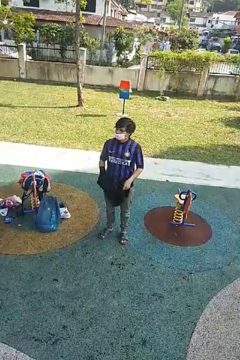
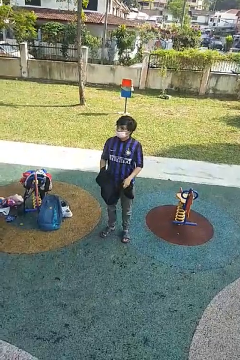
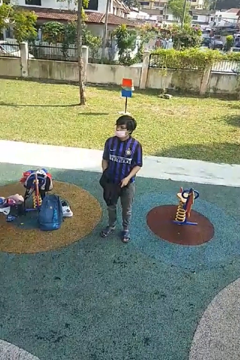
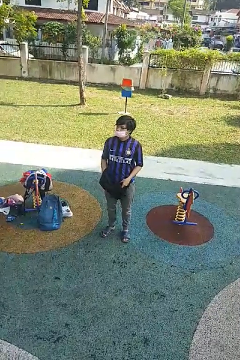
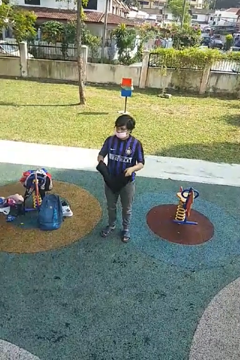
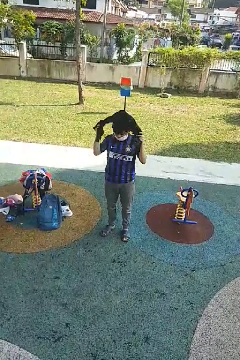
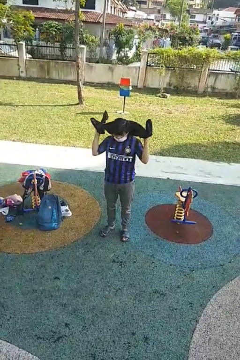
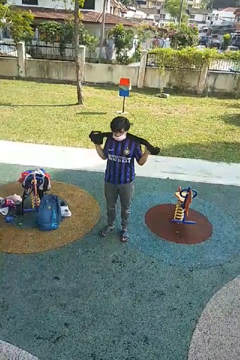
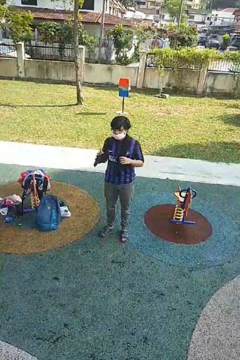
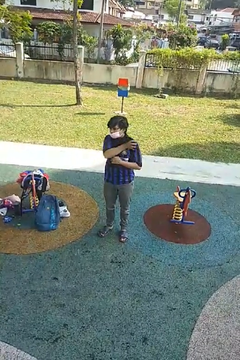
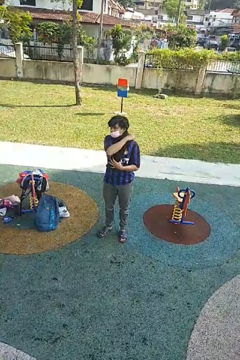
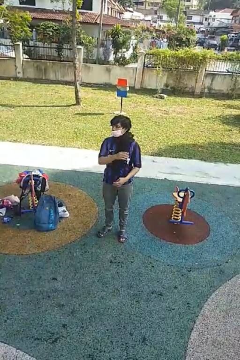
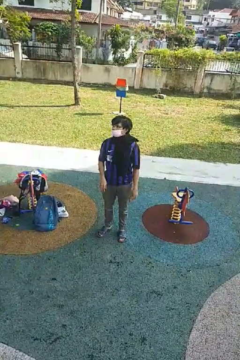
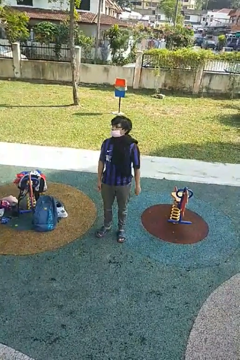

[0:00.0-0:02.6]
person puts on scarf

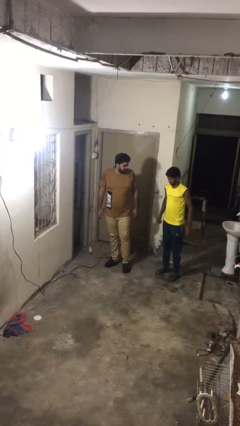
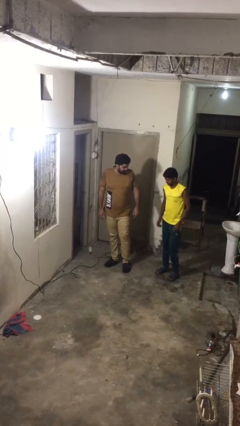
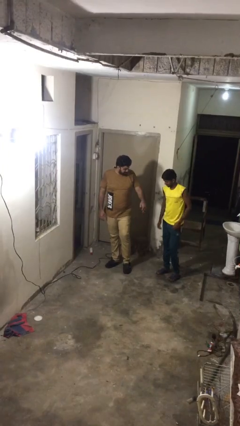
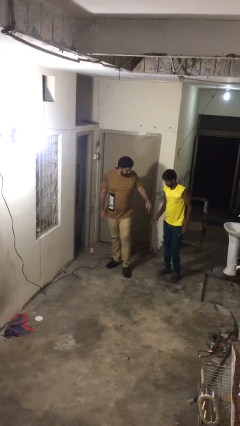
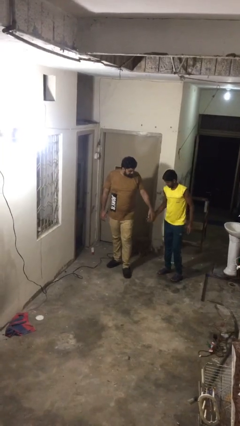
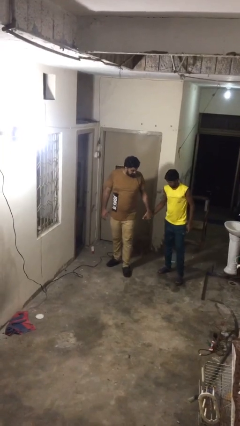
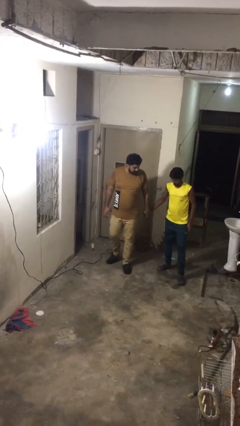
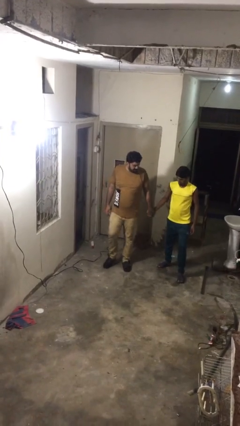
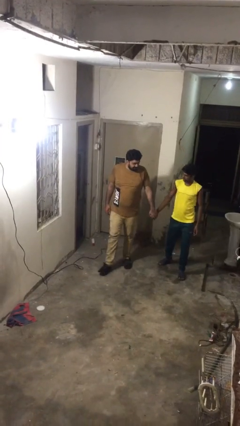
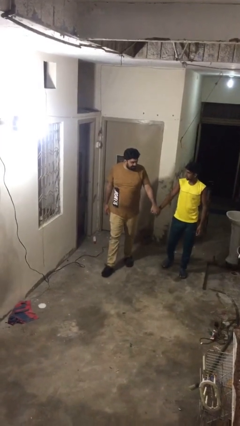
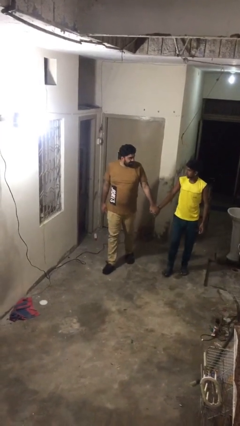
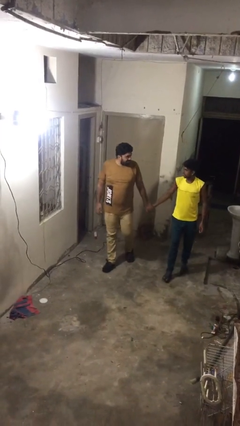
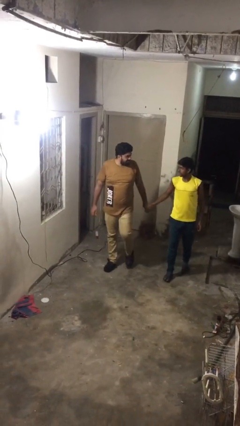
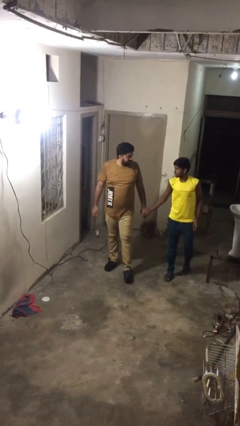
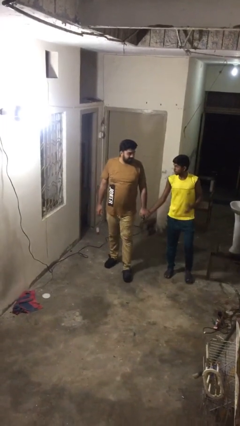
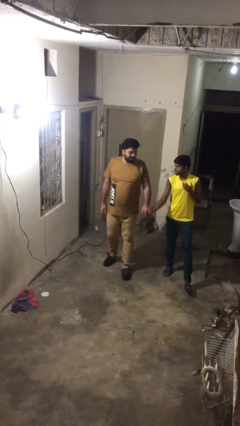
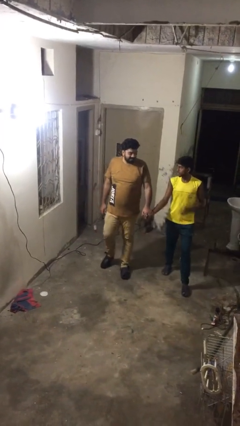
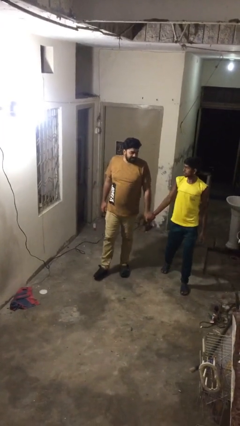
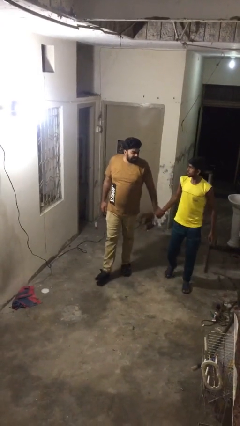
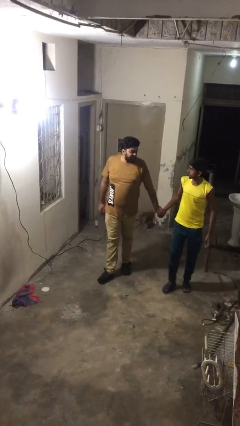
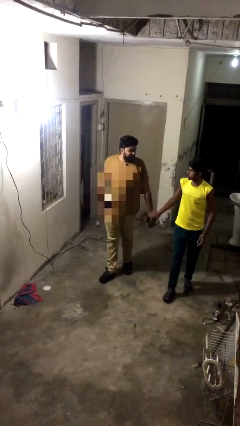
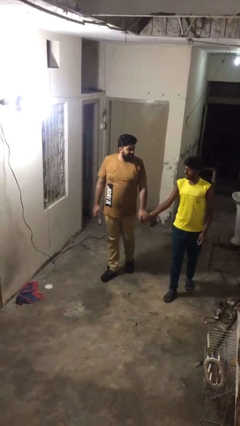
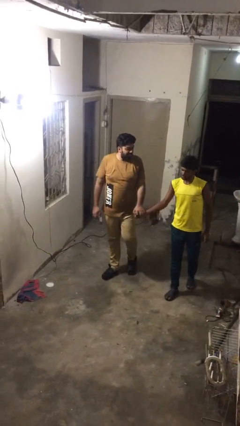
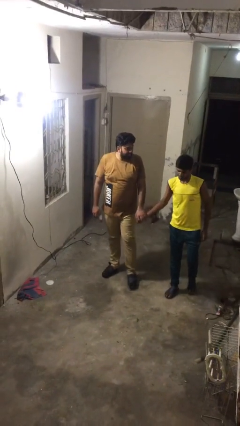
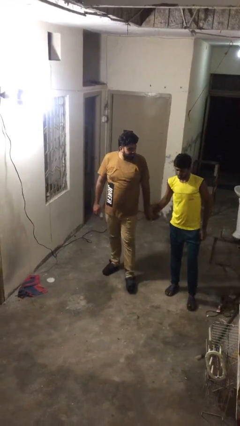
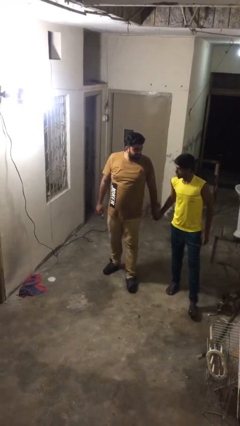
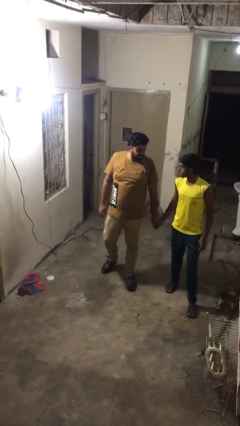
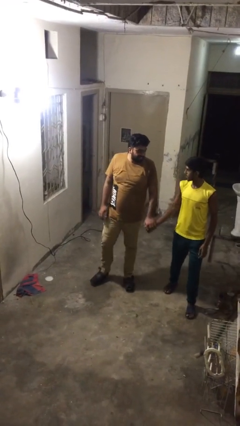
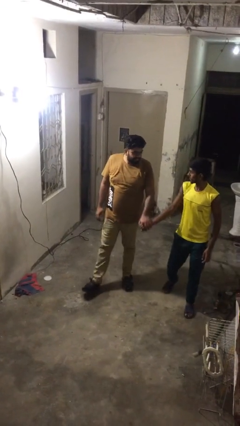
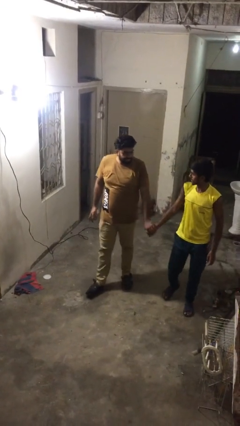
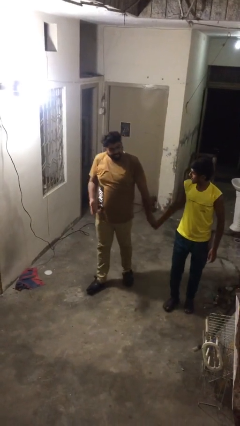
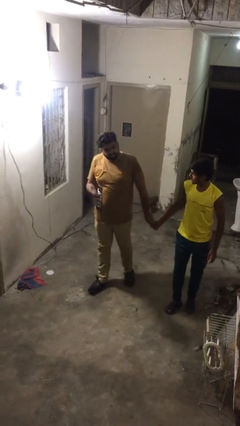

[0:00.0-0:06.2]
person holds hand

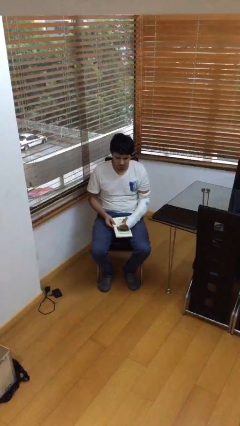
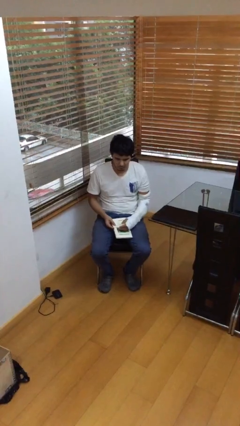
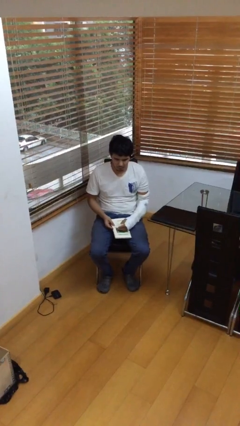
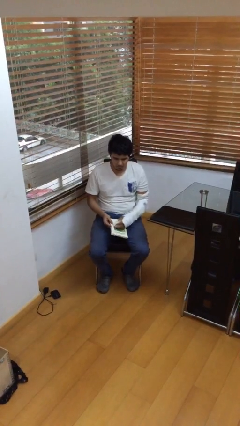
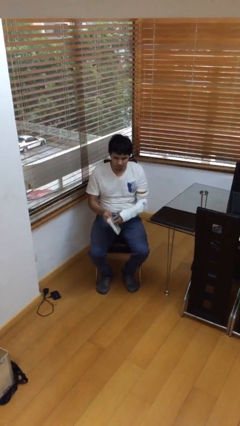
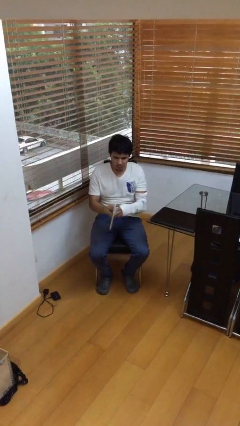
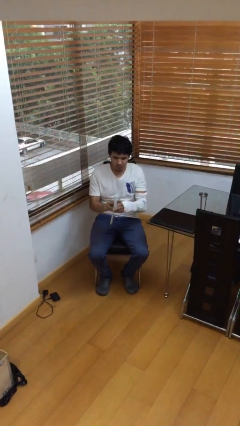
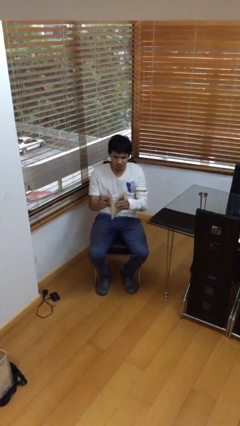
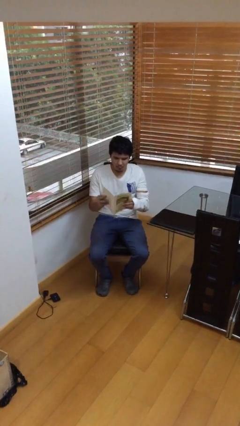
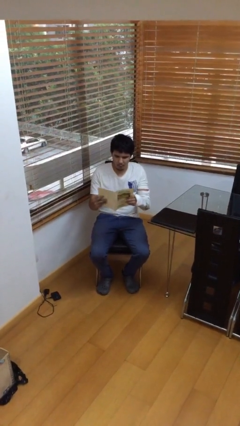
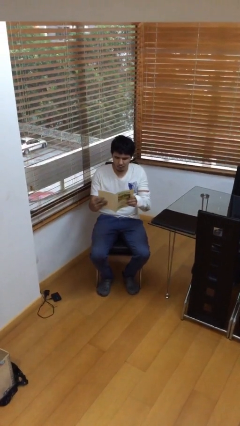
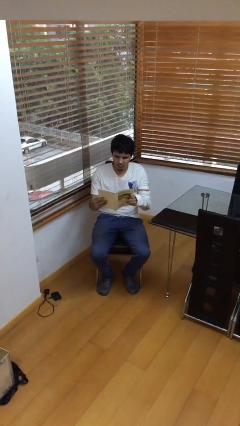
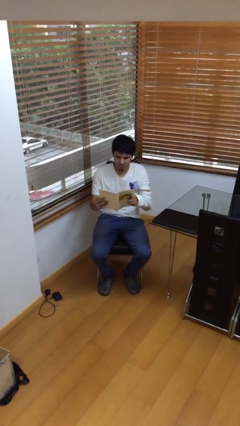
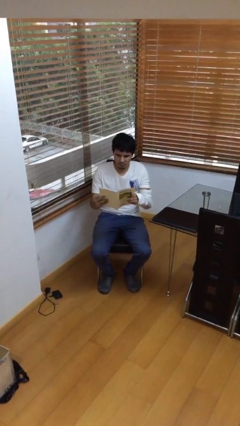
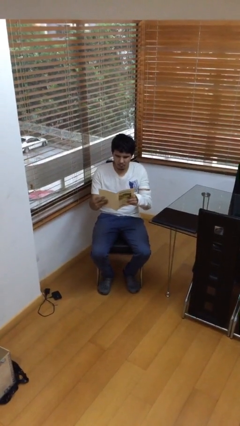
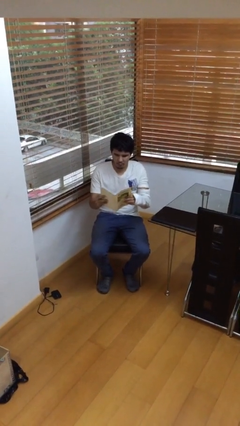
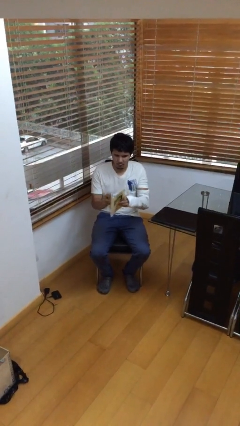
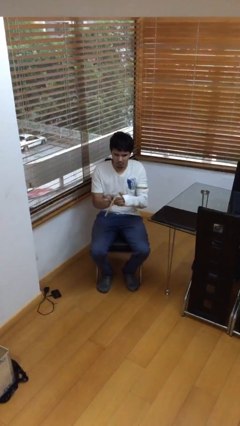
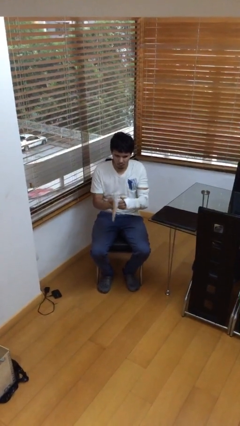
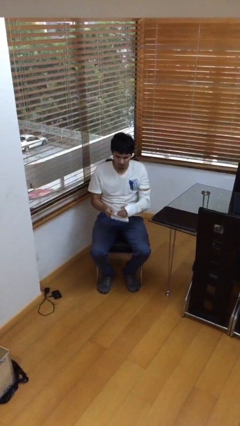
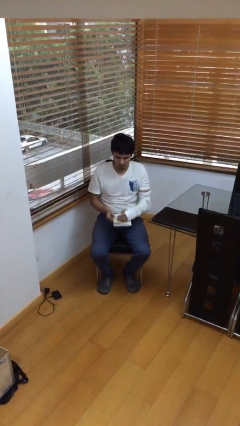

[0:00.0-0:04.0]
person reads document

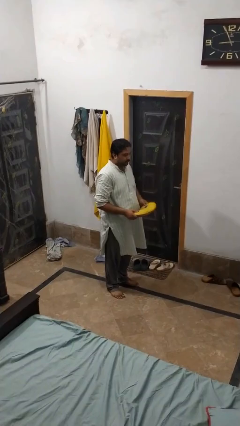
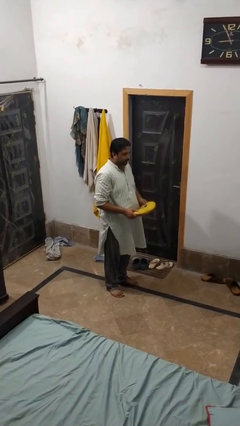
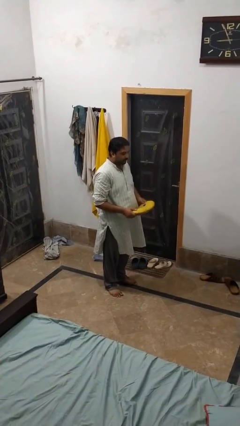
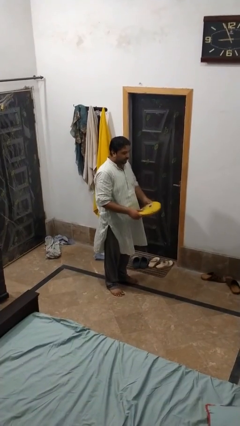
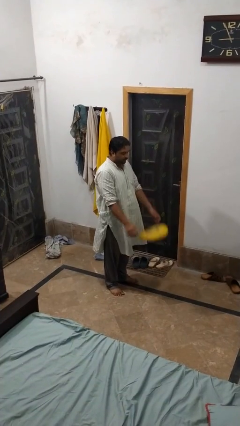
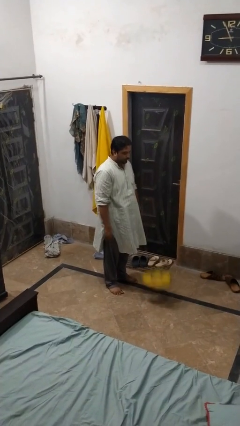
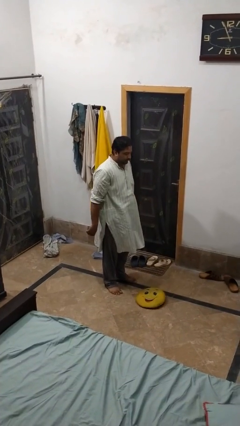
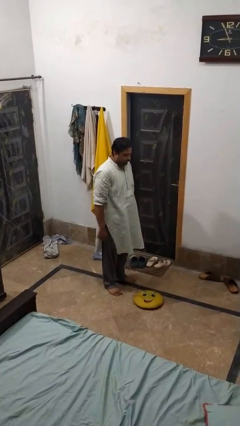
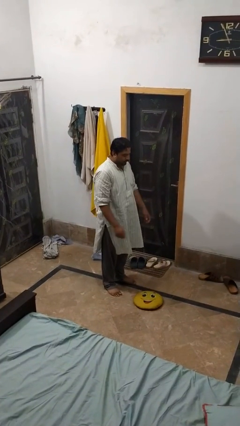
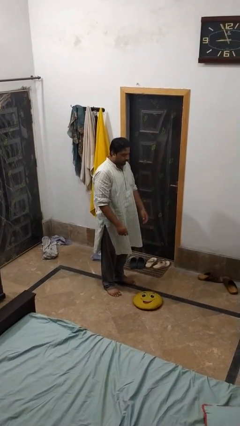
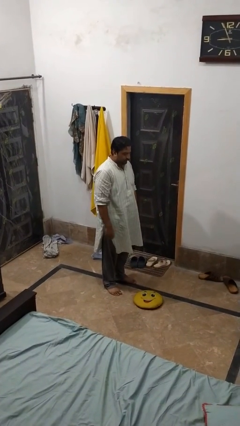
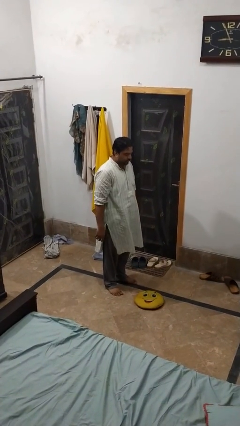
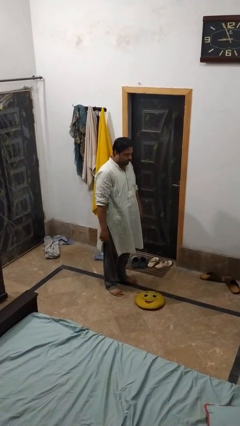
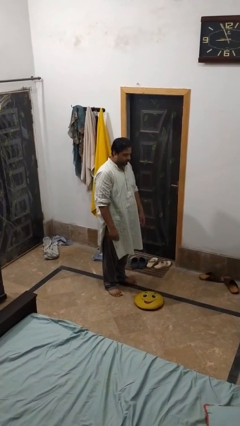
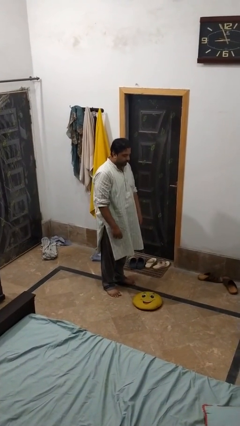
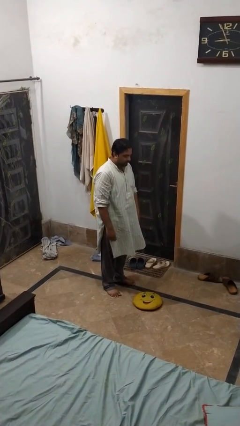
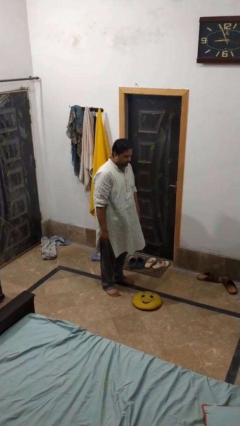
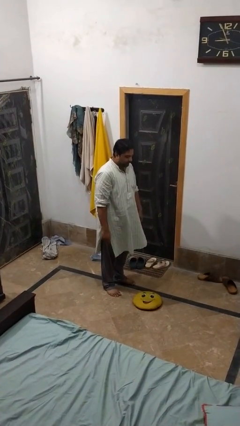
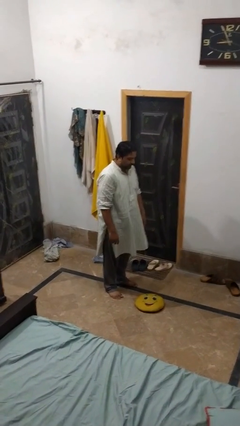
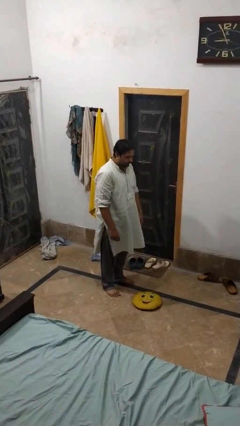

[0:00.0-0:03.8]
person throws object to ground

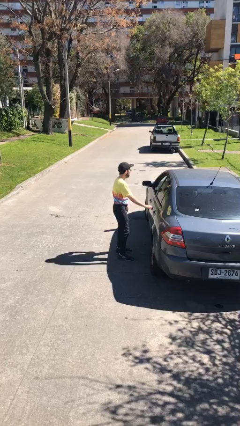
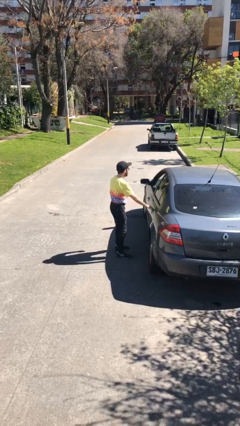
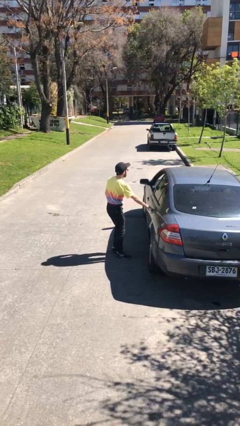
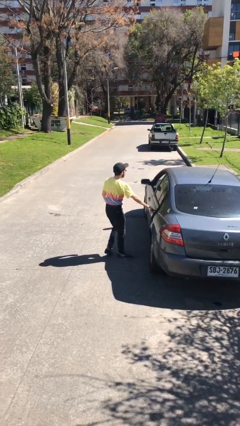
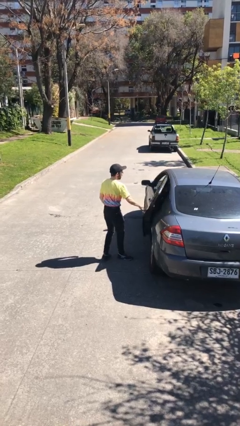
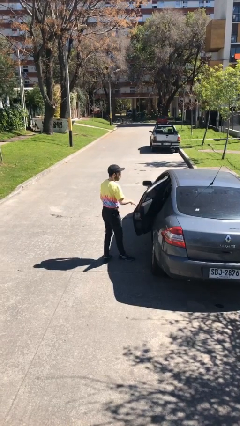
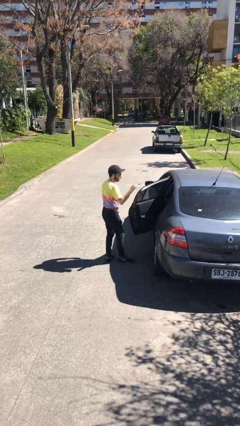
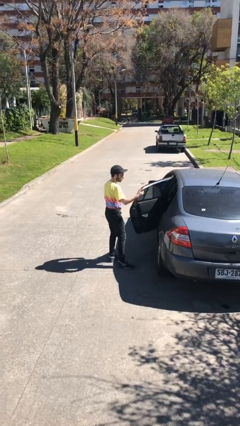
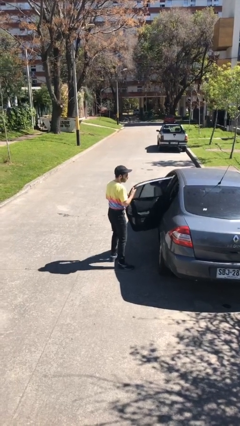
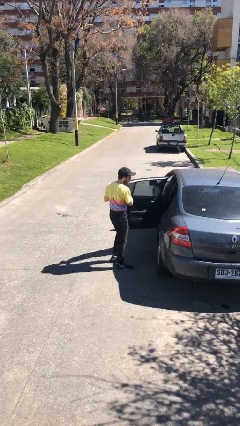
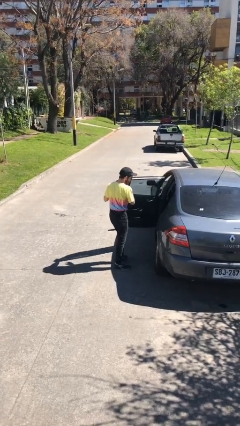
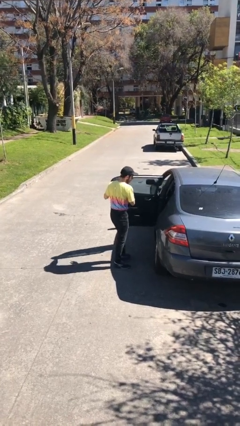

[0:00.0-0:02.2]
person opens car door
